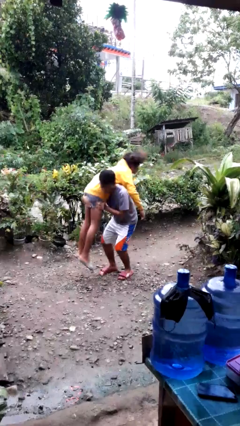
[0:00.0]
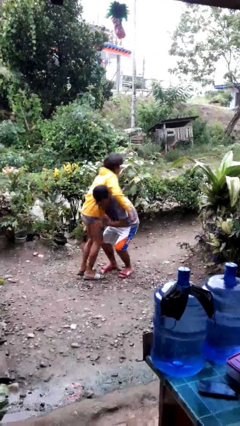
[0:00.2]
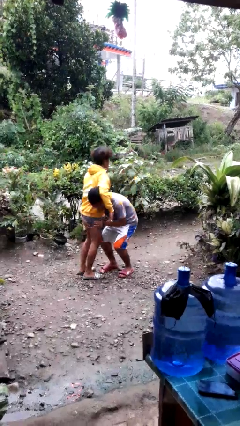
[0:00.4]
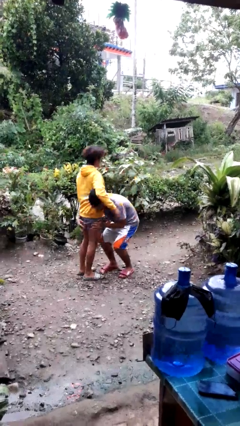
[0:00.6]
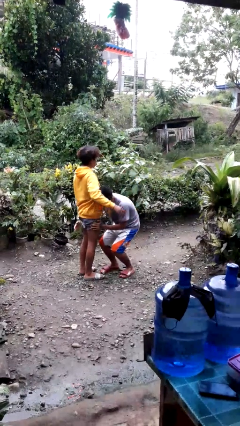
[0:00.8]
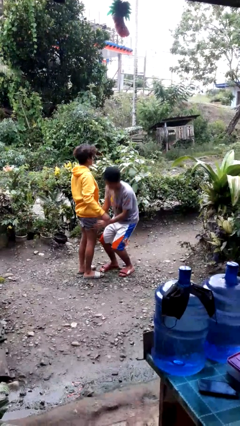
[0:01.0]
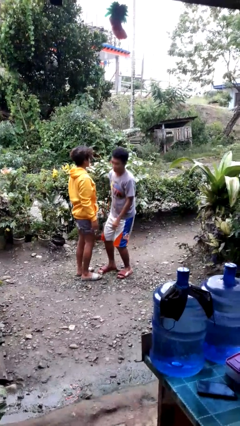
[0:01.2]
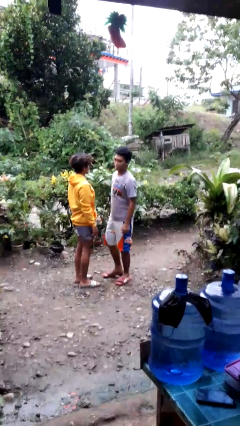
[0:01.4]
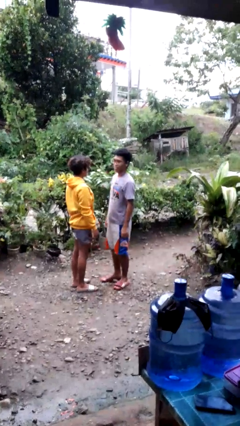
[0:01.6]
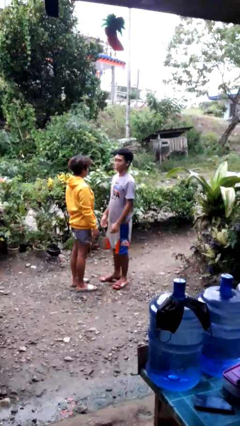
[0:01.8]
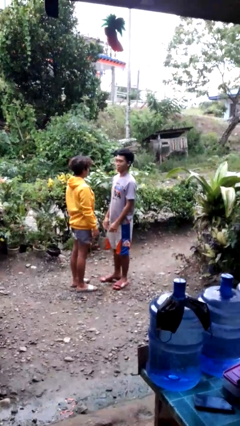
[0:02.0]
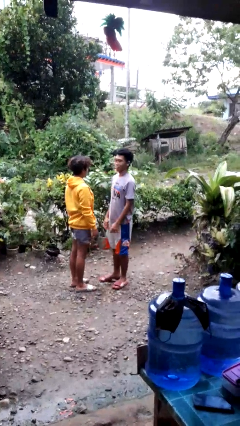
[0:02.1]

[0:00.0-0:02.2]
person puts down person

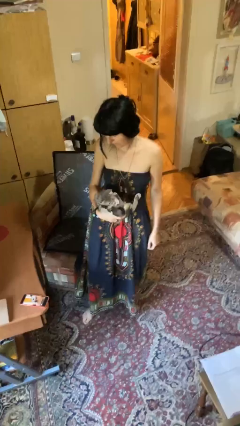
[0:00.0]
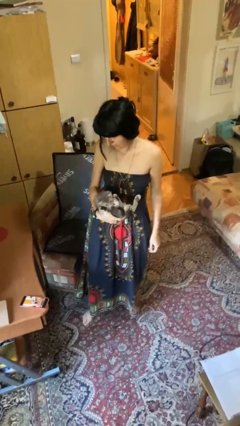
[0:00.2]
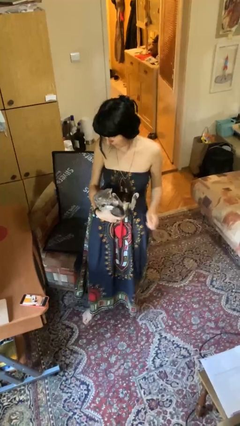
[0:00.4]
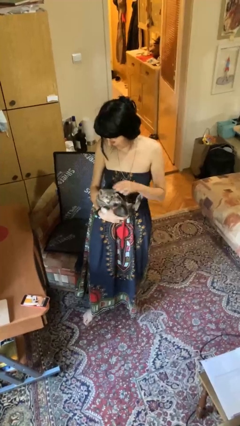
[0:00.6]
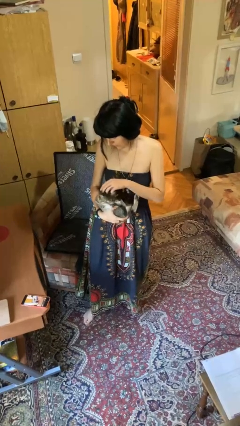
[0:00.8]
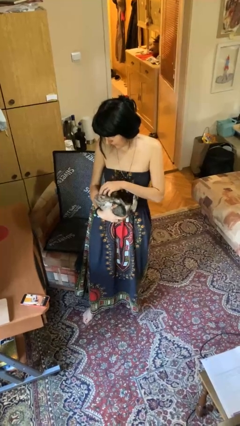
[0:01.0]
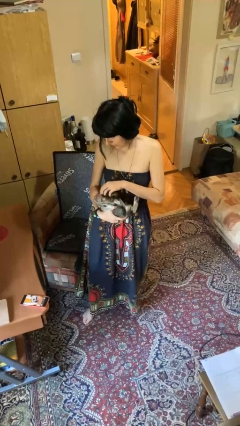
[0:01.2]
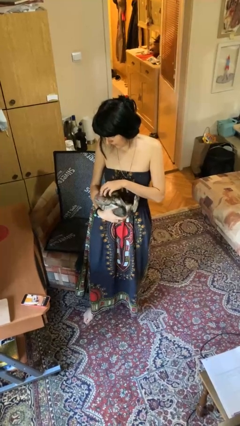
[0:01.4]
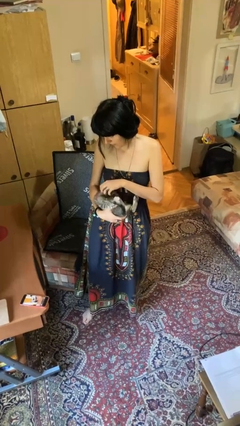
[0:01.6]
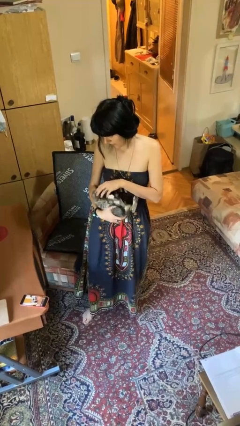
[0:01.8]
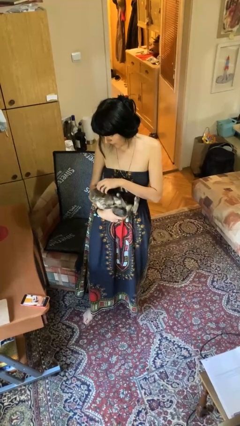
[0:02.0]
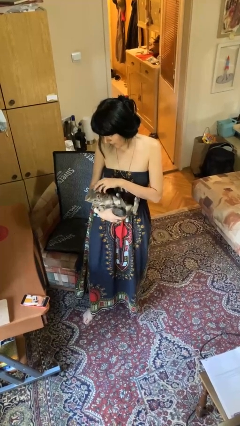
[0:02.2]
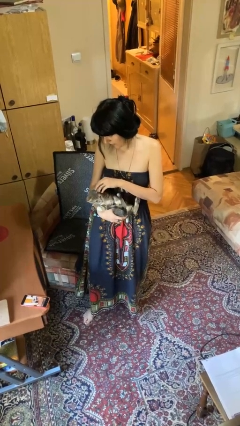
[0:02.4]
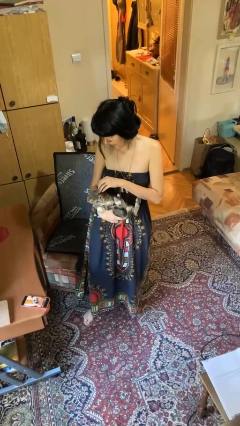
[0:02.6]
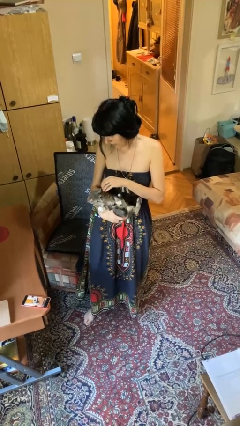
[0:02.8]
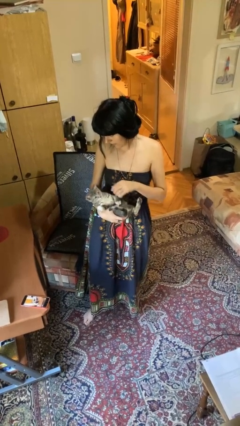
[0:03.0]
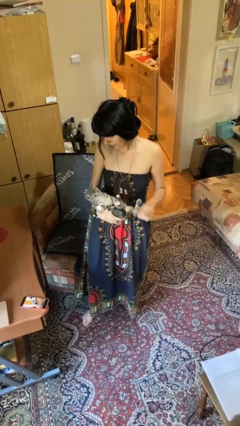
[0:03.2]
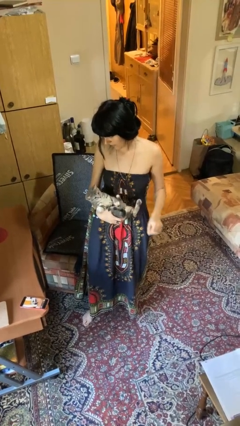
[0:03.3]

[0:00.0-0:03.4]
person pets cat

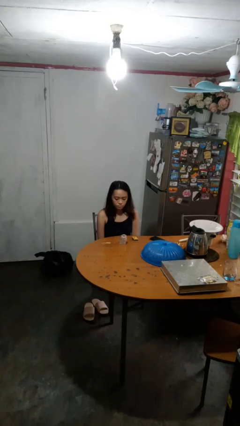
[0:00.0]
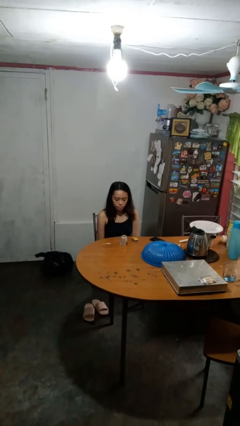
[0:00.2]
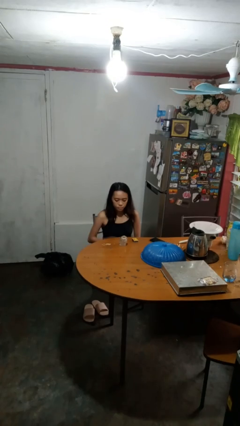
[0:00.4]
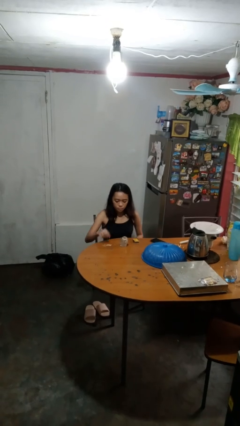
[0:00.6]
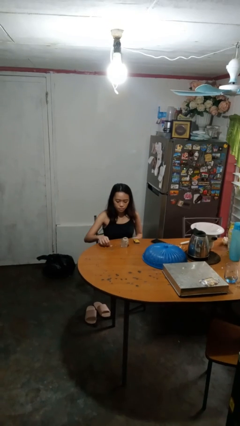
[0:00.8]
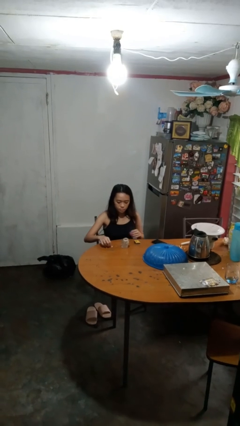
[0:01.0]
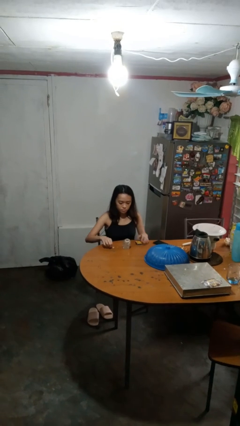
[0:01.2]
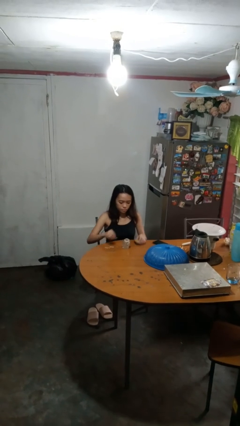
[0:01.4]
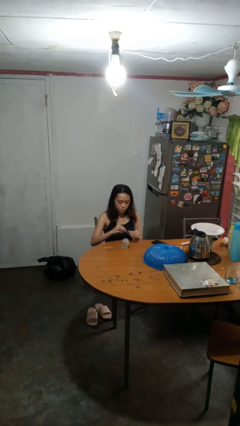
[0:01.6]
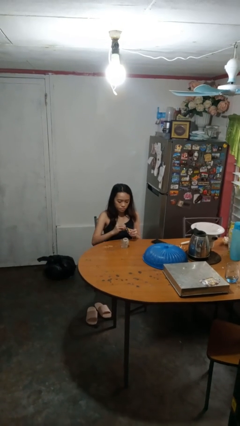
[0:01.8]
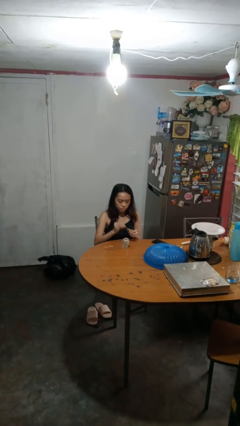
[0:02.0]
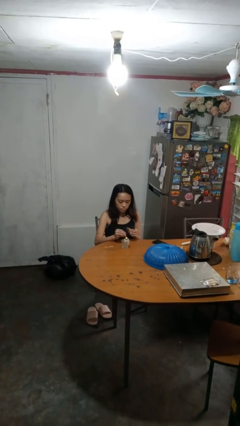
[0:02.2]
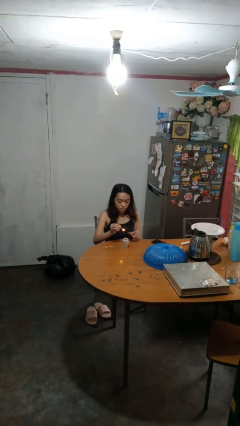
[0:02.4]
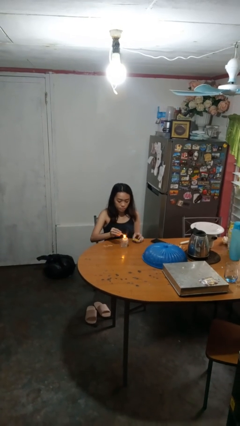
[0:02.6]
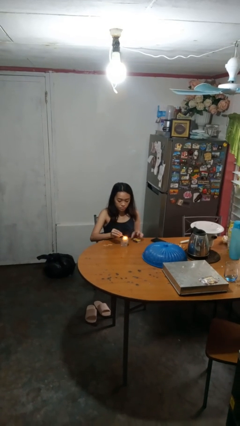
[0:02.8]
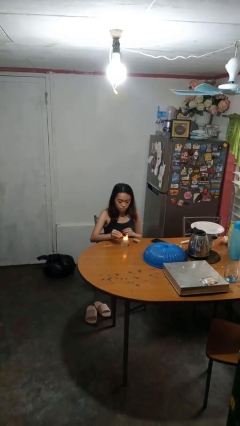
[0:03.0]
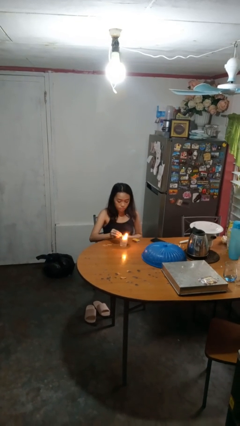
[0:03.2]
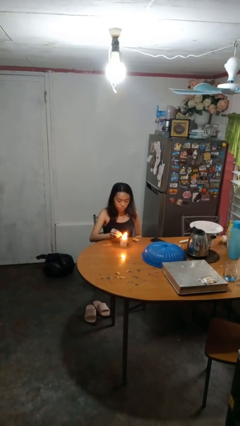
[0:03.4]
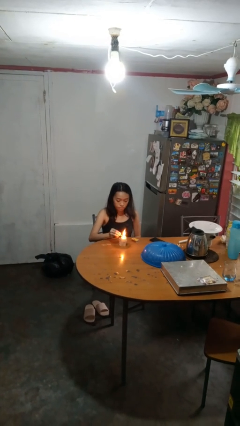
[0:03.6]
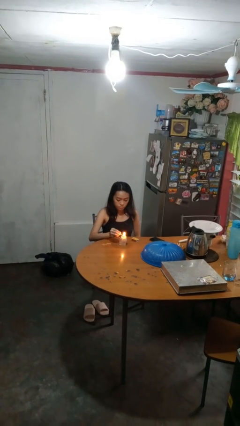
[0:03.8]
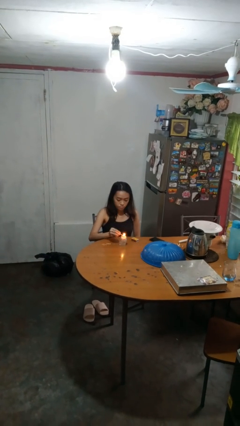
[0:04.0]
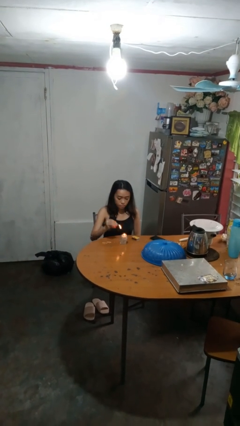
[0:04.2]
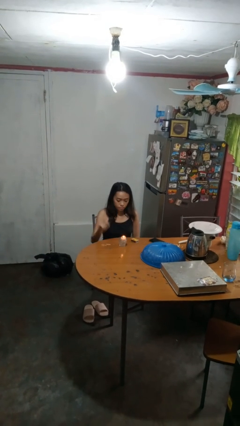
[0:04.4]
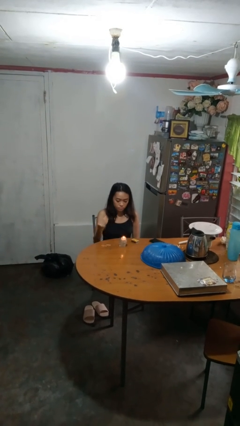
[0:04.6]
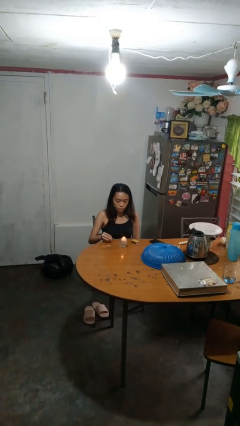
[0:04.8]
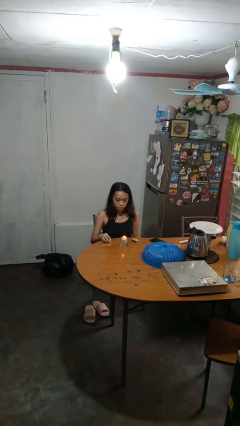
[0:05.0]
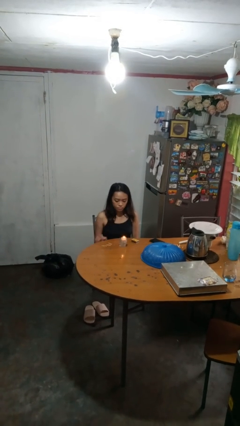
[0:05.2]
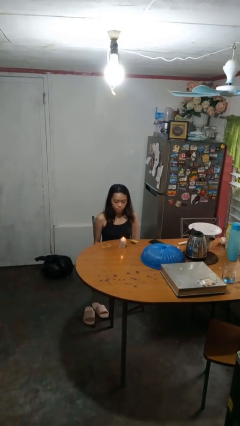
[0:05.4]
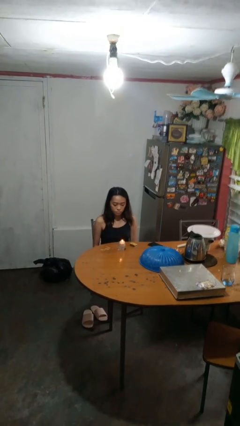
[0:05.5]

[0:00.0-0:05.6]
person lights candle

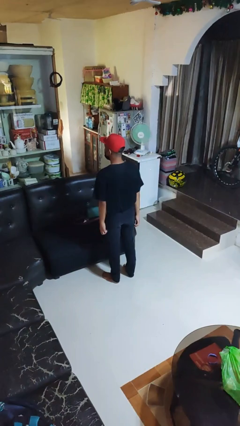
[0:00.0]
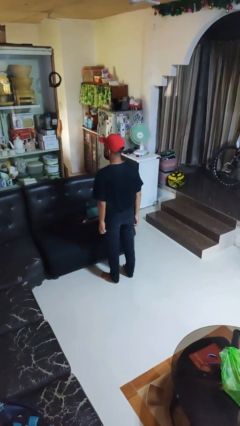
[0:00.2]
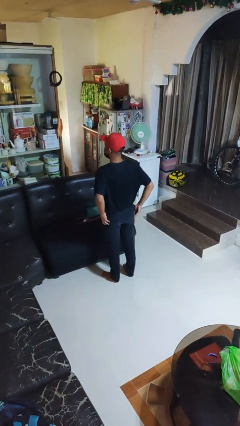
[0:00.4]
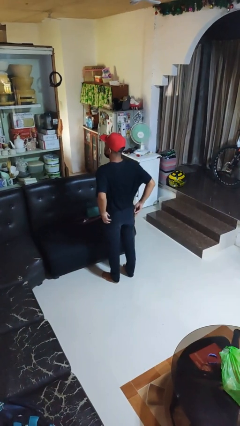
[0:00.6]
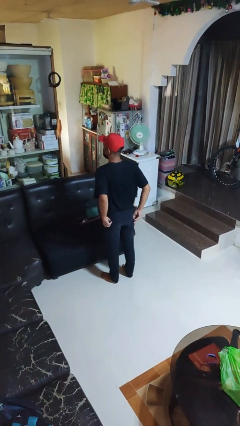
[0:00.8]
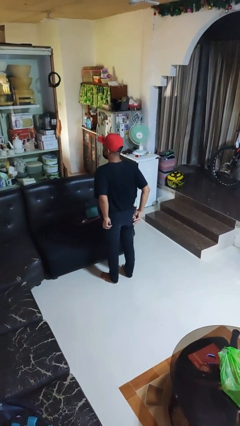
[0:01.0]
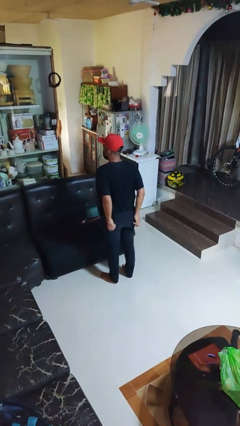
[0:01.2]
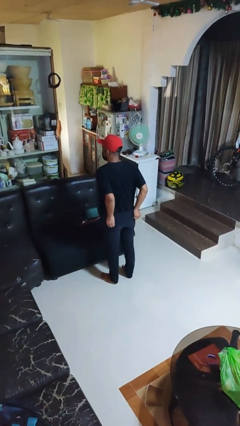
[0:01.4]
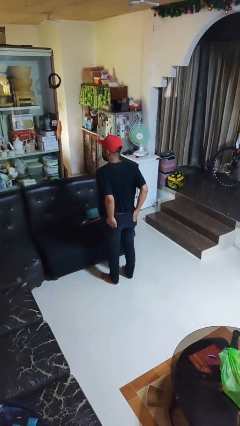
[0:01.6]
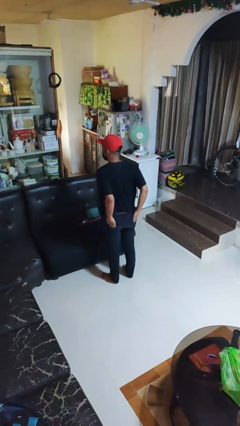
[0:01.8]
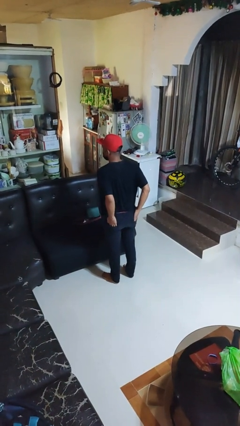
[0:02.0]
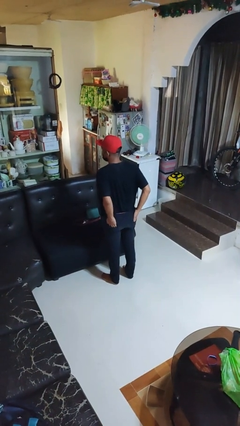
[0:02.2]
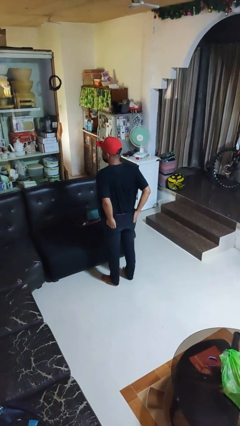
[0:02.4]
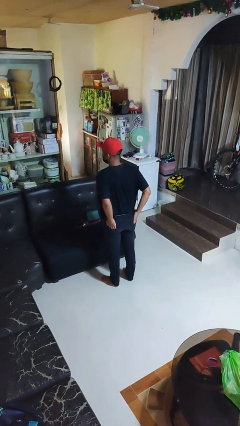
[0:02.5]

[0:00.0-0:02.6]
person puts hands in back pockets

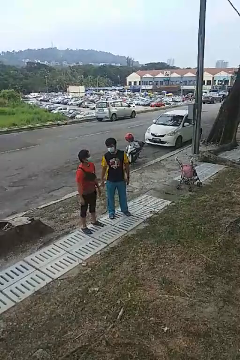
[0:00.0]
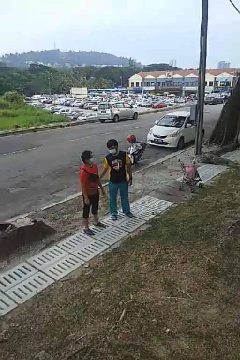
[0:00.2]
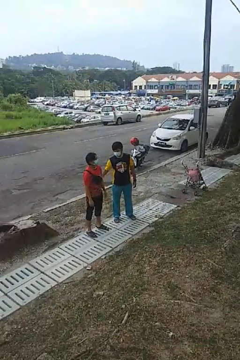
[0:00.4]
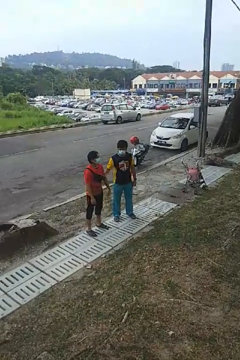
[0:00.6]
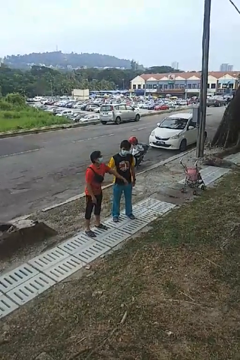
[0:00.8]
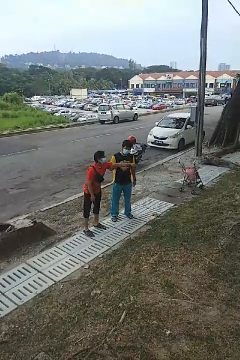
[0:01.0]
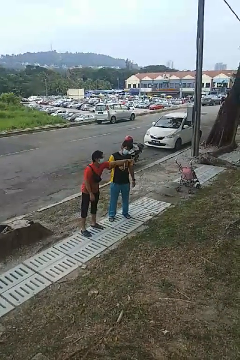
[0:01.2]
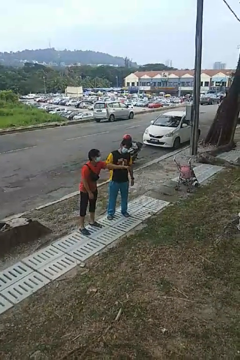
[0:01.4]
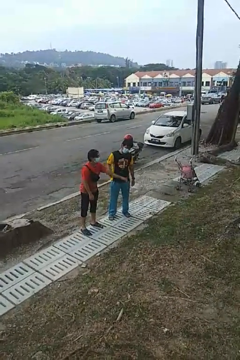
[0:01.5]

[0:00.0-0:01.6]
person grabs person by bicep

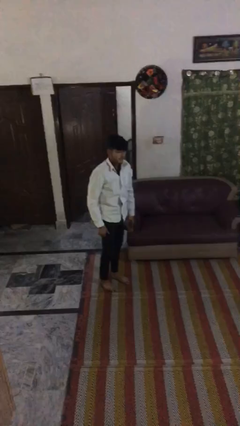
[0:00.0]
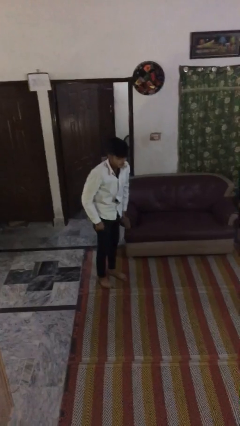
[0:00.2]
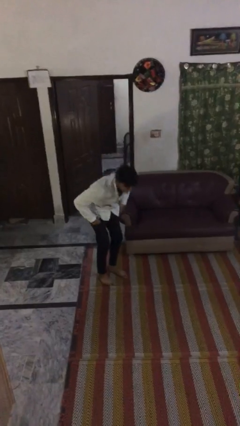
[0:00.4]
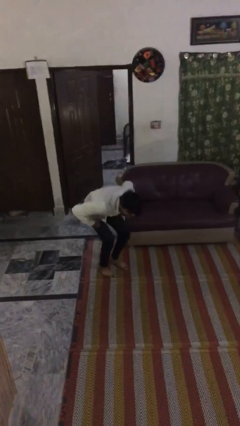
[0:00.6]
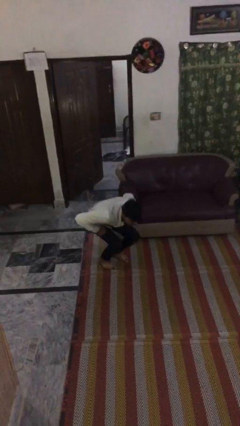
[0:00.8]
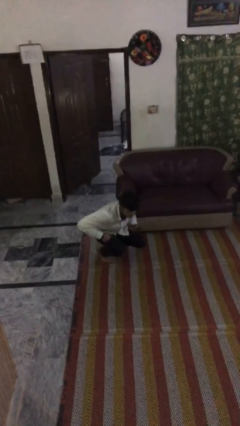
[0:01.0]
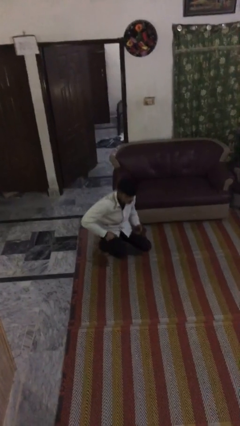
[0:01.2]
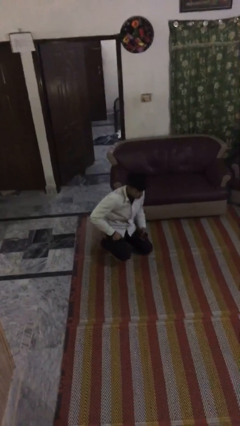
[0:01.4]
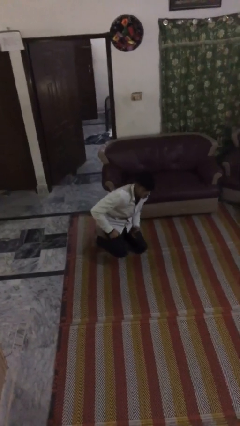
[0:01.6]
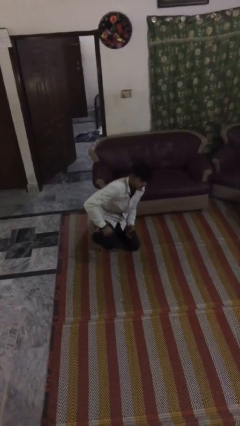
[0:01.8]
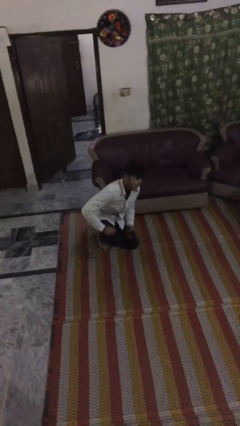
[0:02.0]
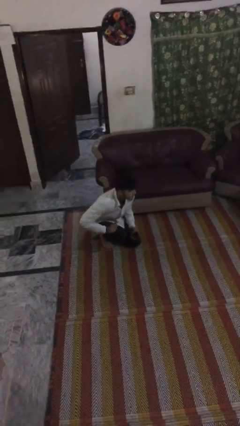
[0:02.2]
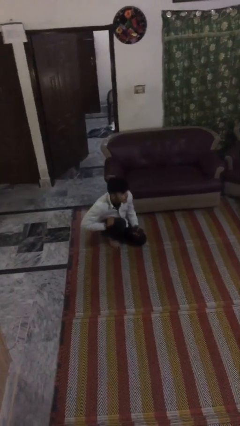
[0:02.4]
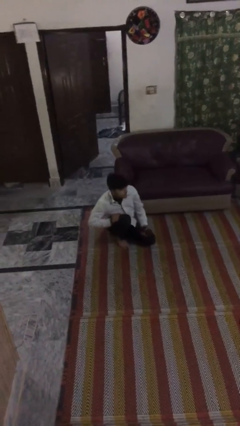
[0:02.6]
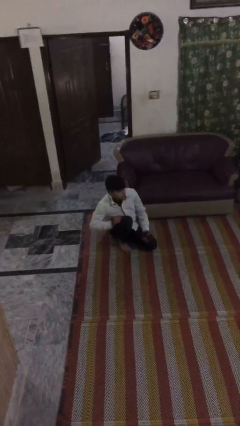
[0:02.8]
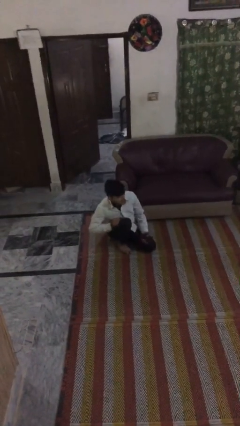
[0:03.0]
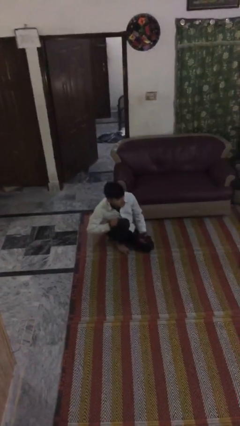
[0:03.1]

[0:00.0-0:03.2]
person sits down
